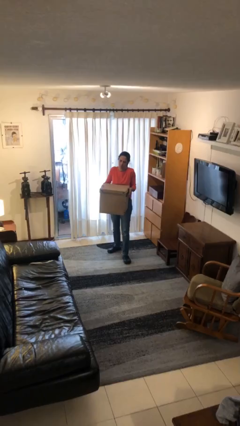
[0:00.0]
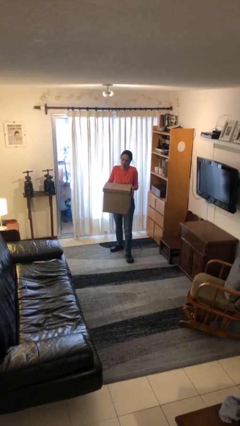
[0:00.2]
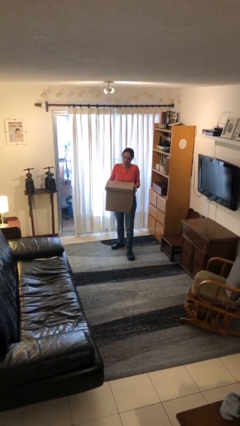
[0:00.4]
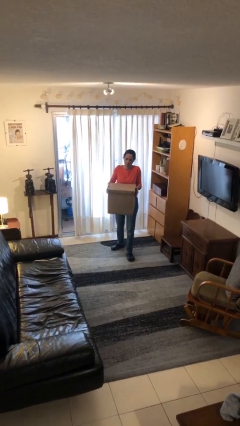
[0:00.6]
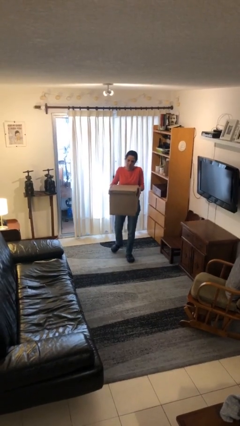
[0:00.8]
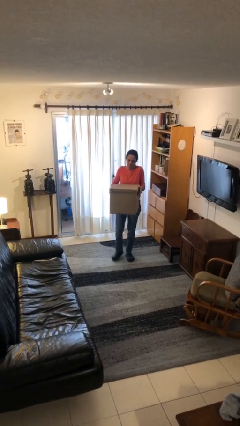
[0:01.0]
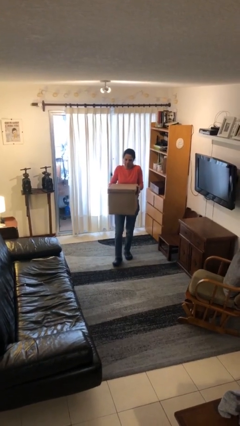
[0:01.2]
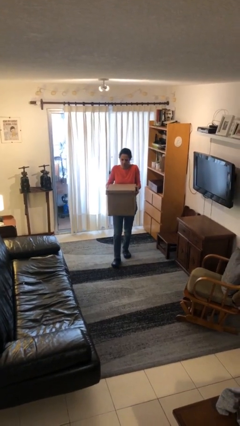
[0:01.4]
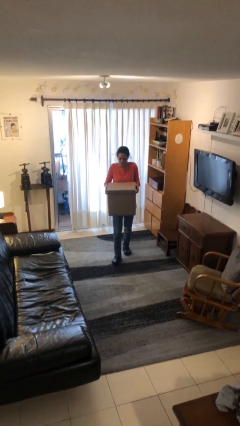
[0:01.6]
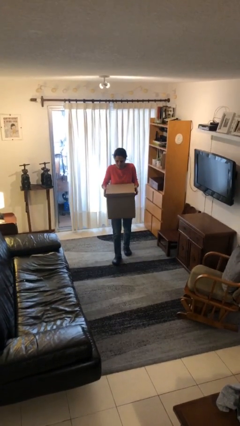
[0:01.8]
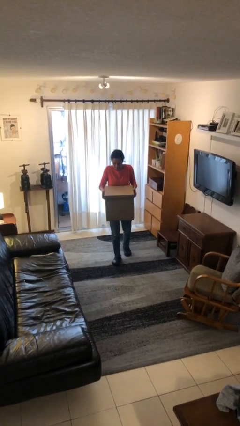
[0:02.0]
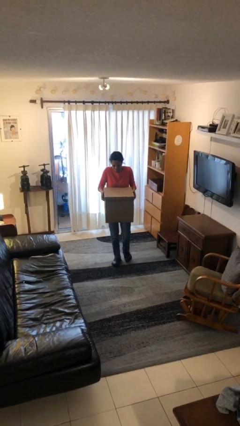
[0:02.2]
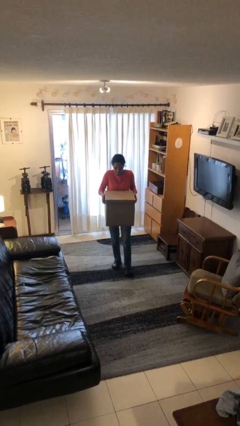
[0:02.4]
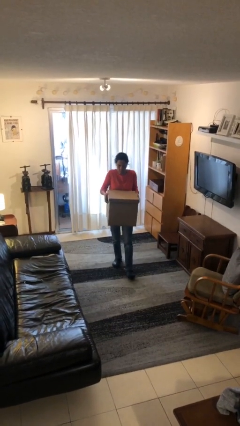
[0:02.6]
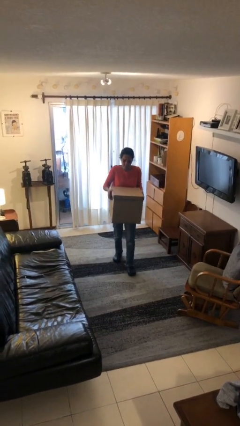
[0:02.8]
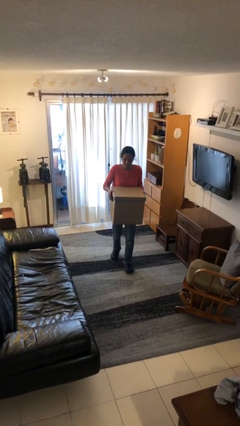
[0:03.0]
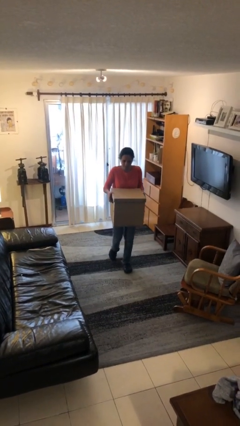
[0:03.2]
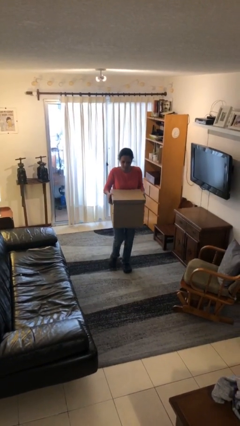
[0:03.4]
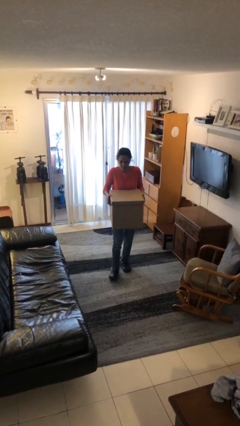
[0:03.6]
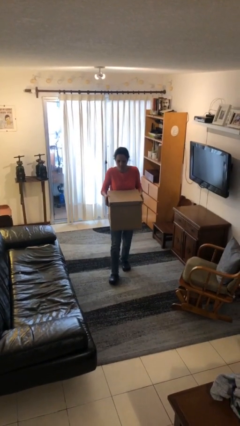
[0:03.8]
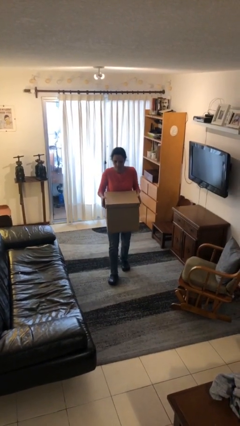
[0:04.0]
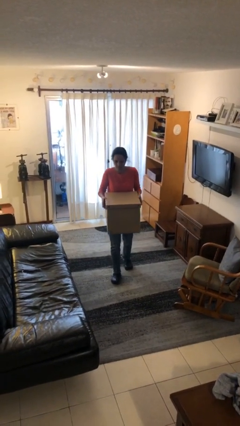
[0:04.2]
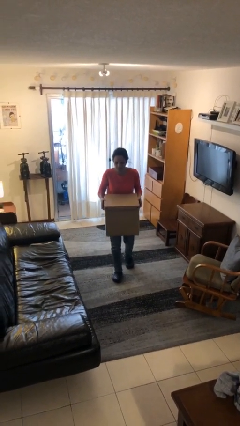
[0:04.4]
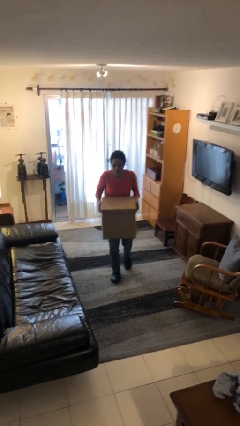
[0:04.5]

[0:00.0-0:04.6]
person carries heavy object

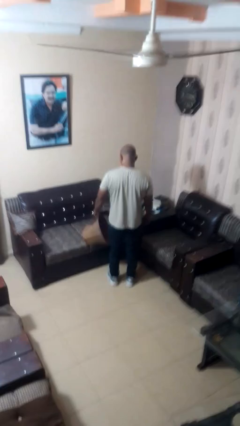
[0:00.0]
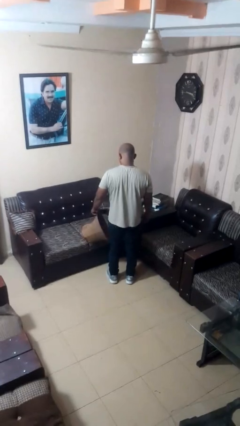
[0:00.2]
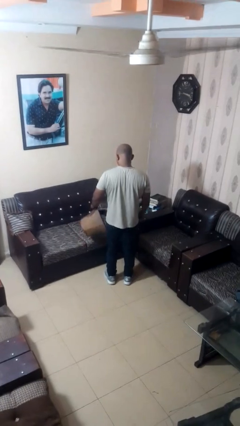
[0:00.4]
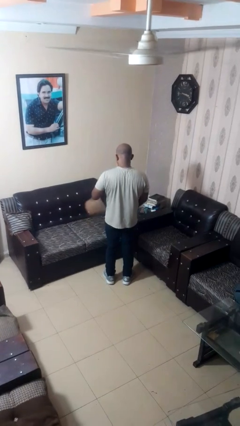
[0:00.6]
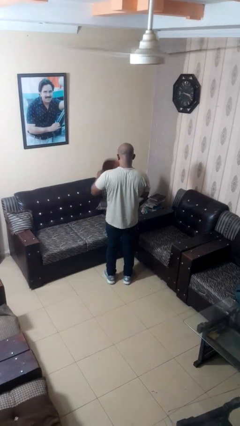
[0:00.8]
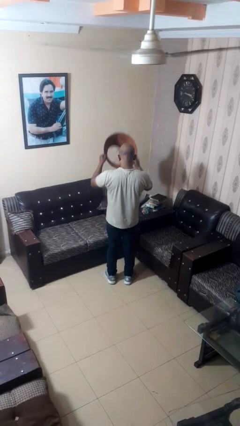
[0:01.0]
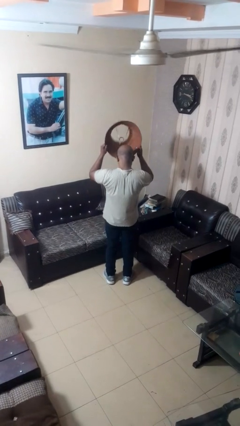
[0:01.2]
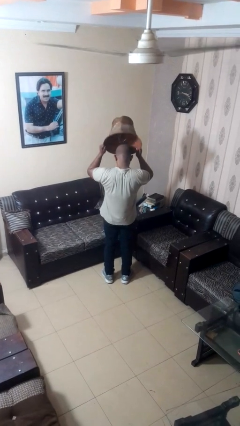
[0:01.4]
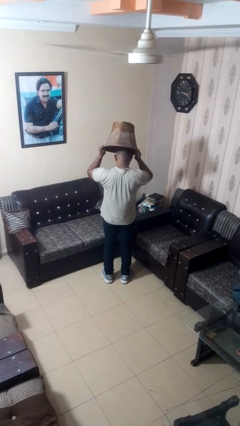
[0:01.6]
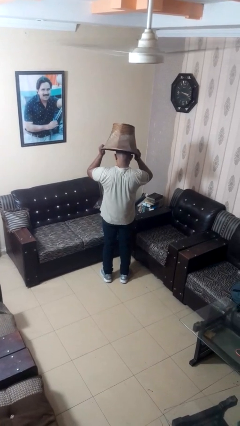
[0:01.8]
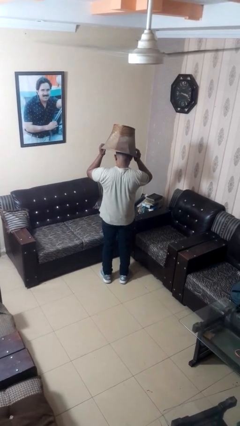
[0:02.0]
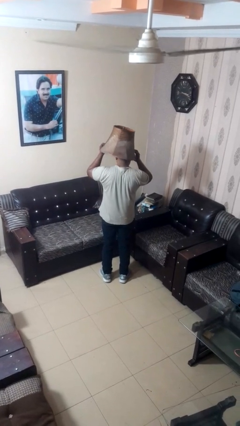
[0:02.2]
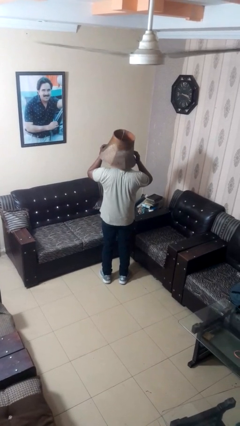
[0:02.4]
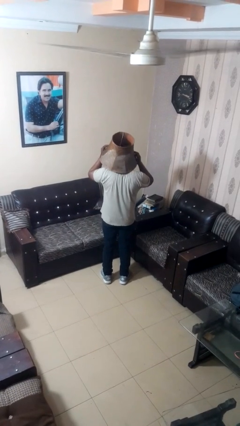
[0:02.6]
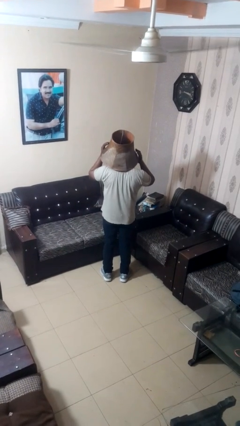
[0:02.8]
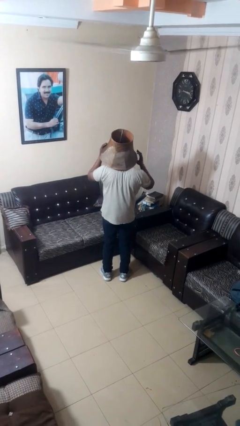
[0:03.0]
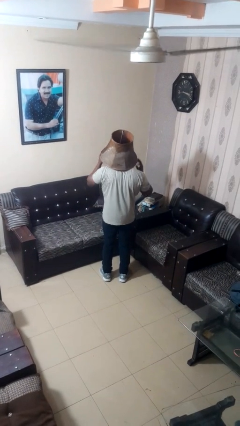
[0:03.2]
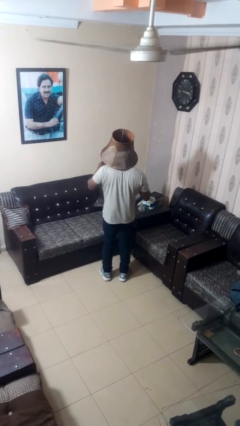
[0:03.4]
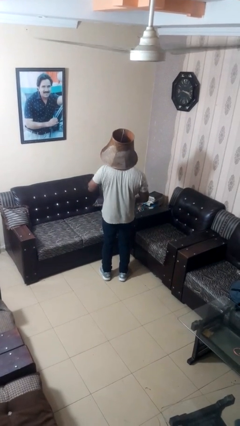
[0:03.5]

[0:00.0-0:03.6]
person puts on hat

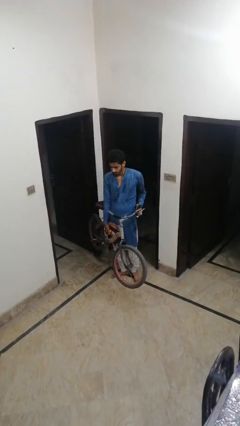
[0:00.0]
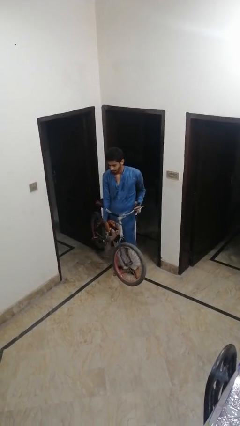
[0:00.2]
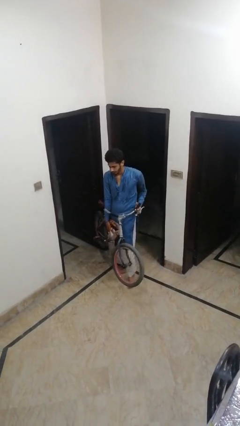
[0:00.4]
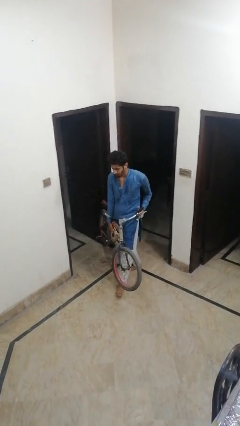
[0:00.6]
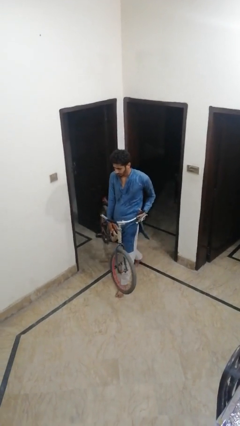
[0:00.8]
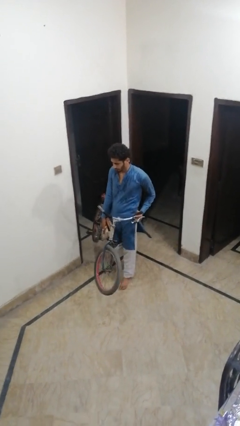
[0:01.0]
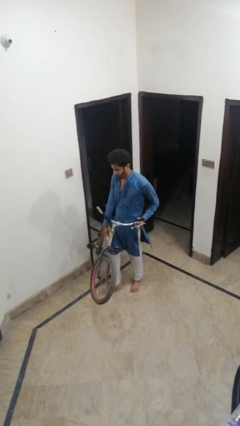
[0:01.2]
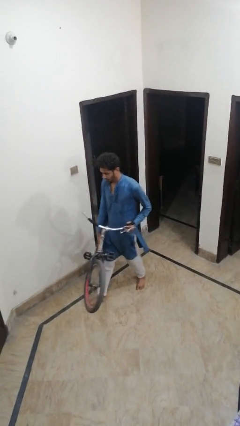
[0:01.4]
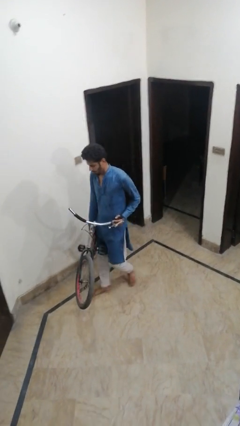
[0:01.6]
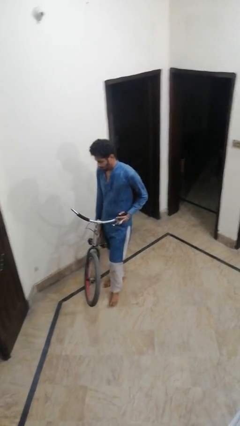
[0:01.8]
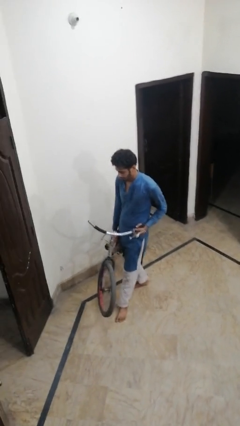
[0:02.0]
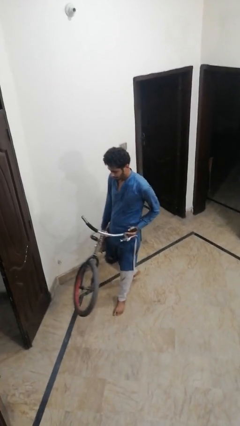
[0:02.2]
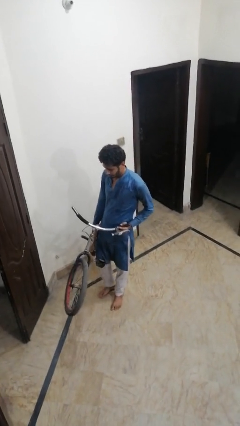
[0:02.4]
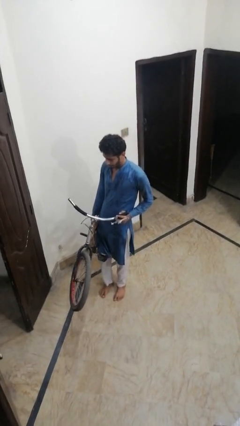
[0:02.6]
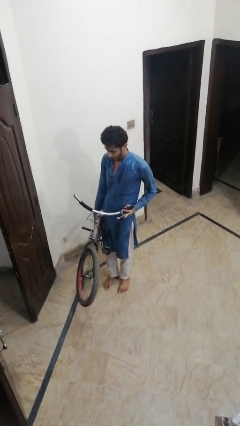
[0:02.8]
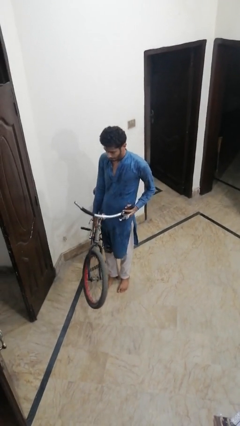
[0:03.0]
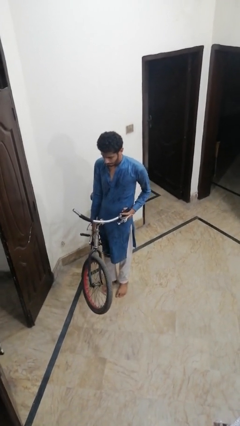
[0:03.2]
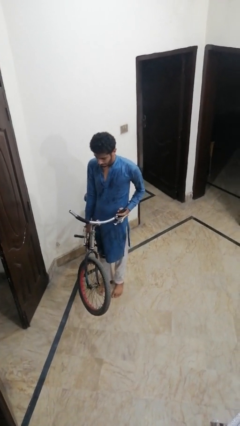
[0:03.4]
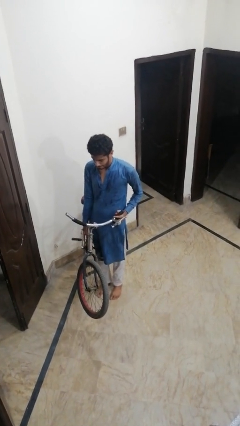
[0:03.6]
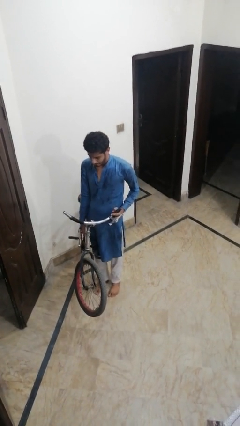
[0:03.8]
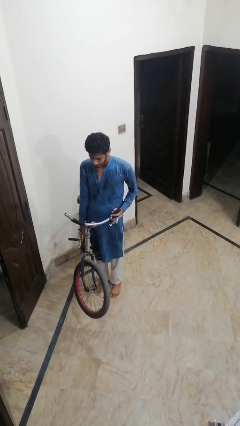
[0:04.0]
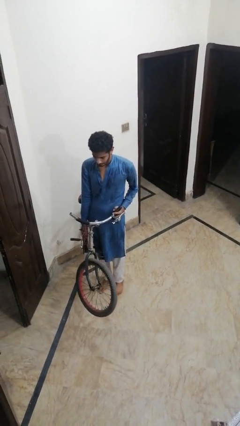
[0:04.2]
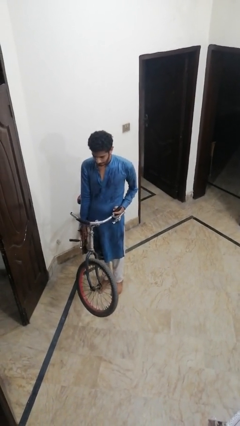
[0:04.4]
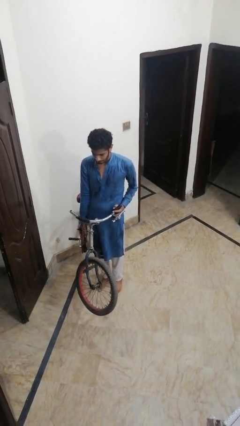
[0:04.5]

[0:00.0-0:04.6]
person carries bicycle

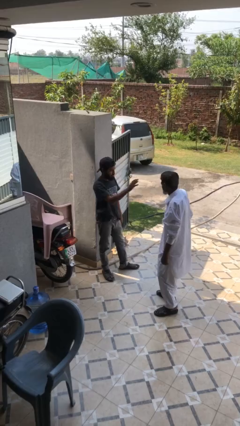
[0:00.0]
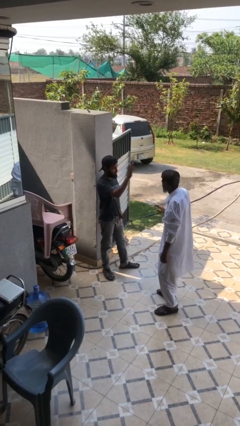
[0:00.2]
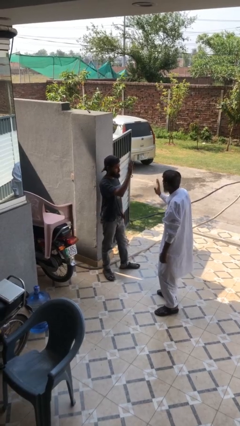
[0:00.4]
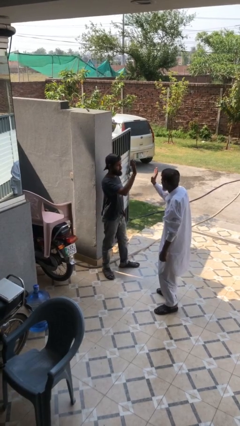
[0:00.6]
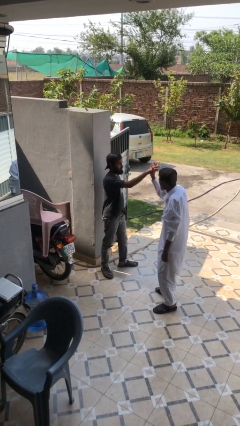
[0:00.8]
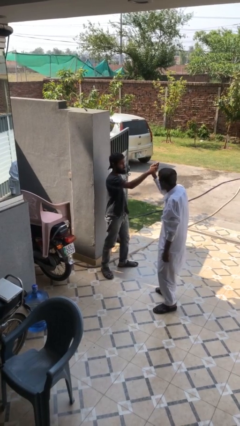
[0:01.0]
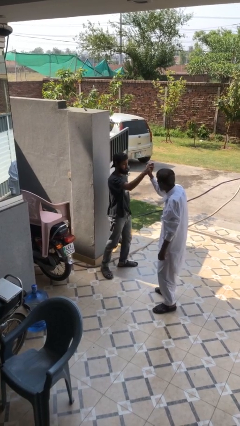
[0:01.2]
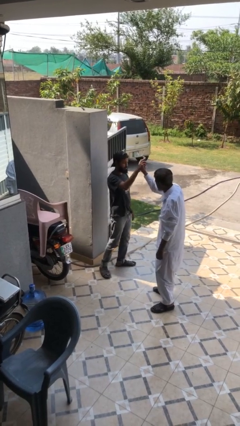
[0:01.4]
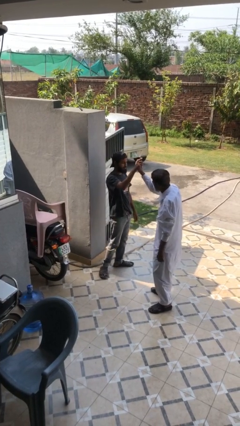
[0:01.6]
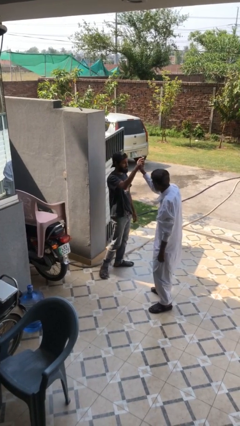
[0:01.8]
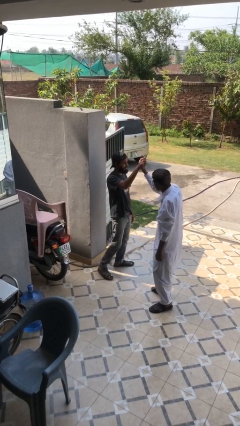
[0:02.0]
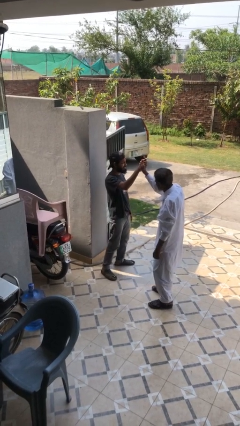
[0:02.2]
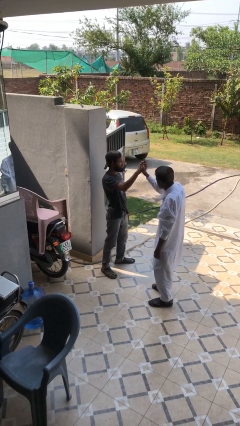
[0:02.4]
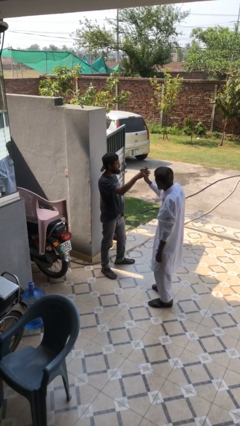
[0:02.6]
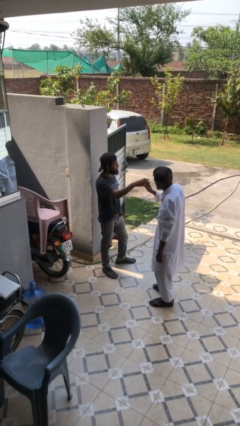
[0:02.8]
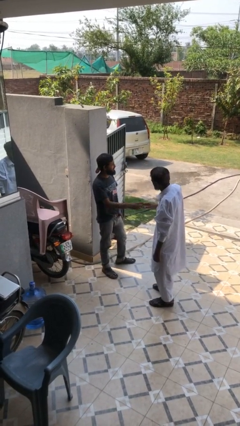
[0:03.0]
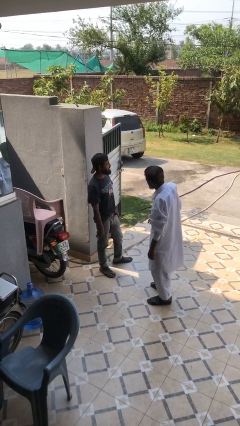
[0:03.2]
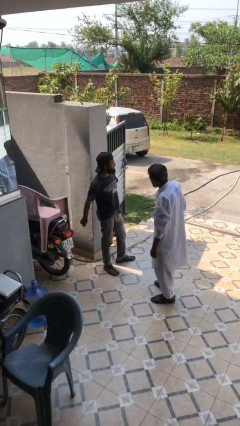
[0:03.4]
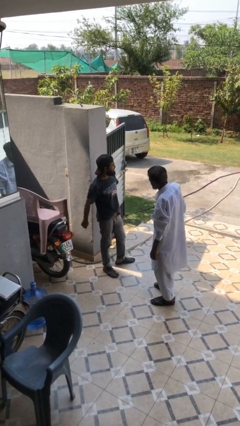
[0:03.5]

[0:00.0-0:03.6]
person highfives hand

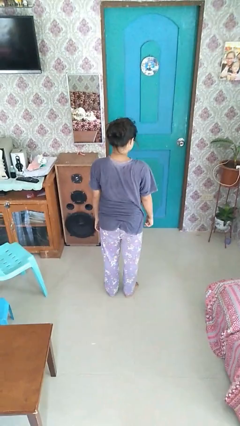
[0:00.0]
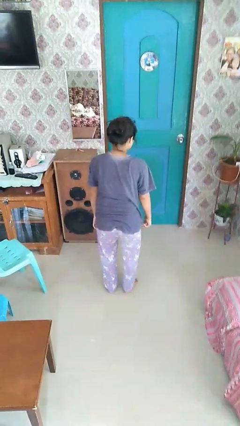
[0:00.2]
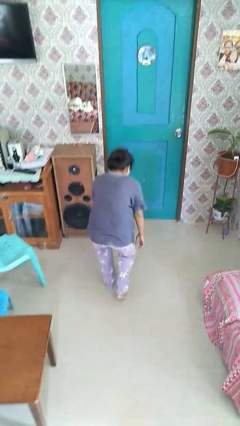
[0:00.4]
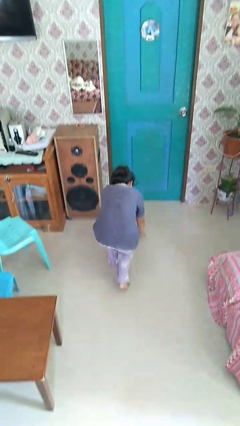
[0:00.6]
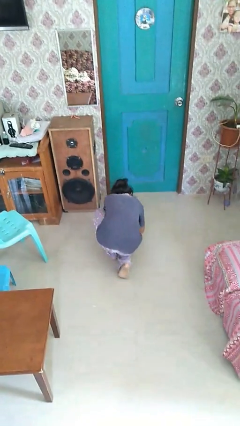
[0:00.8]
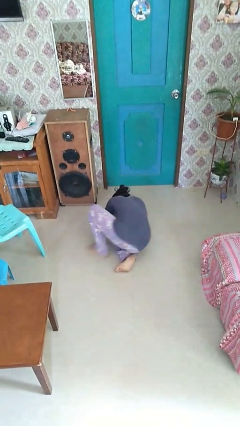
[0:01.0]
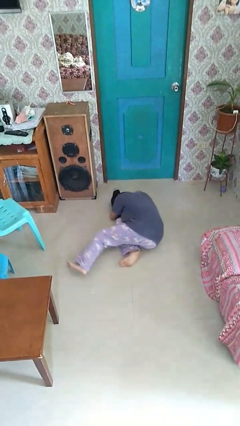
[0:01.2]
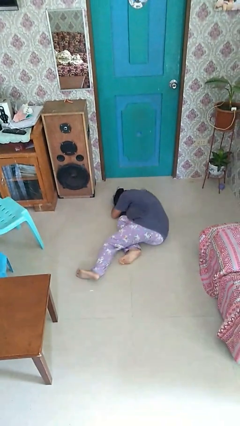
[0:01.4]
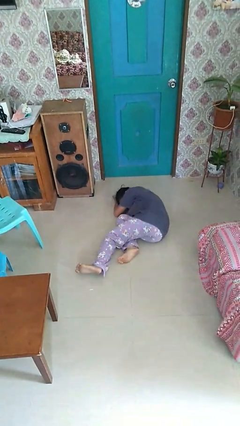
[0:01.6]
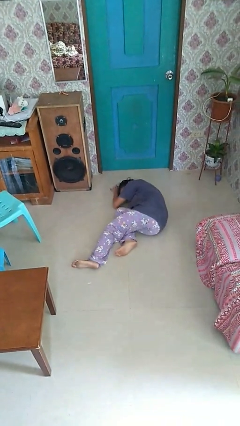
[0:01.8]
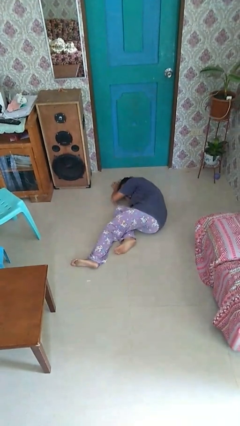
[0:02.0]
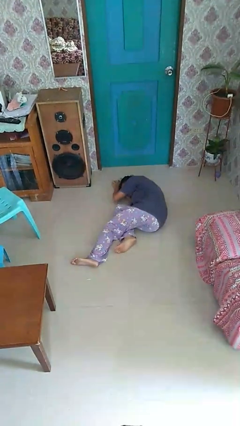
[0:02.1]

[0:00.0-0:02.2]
person falls while standing
